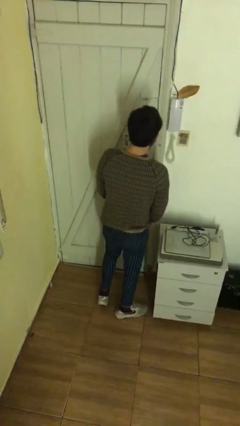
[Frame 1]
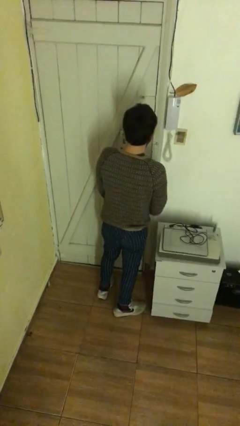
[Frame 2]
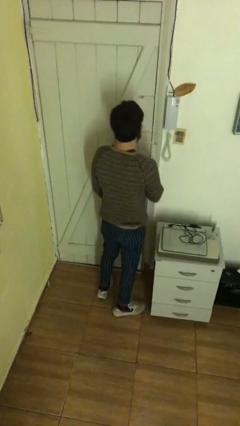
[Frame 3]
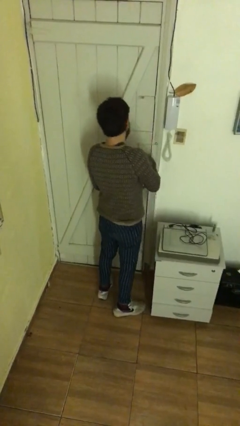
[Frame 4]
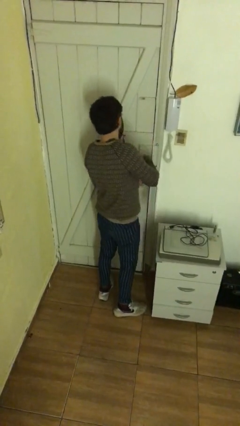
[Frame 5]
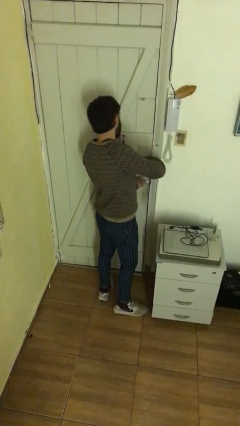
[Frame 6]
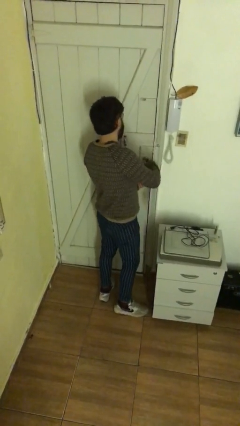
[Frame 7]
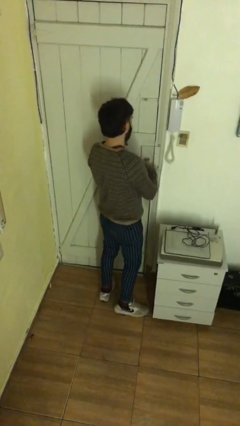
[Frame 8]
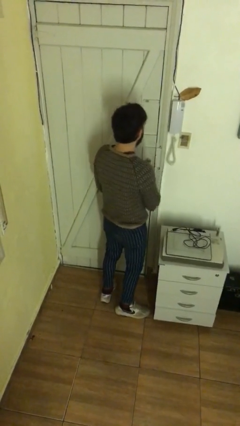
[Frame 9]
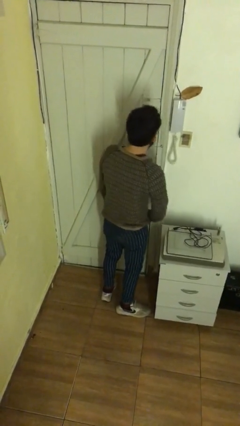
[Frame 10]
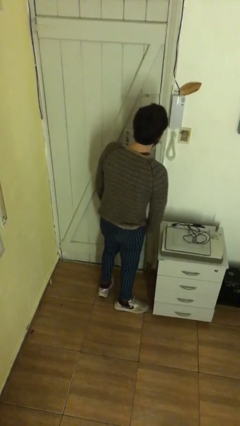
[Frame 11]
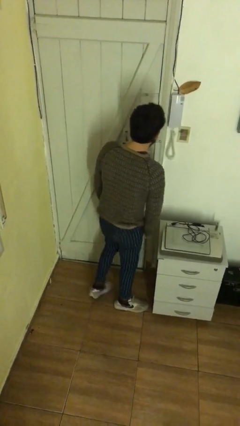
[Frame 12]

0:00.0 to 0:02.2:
person locks door with keys

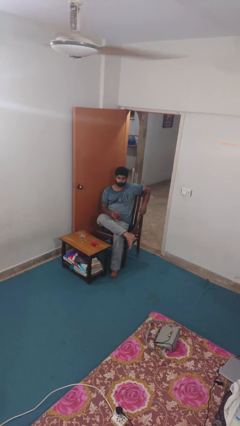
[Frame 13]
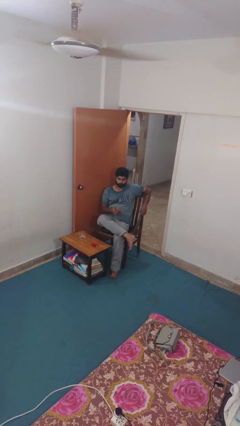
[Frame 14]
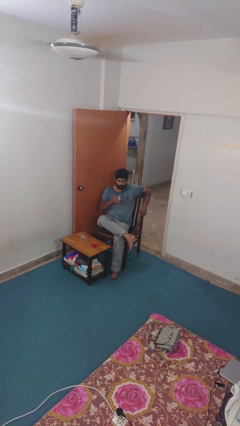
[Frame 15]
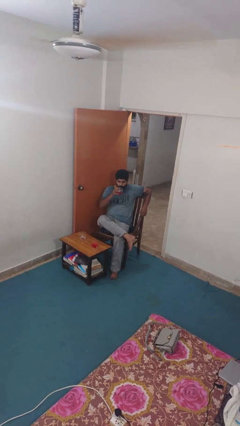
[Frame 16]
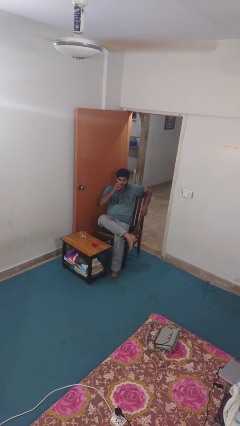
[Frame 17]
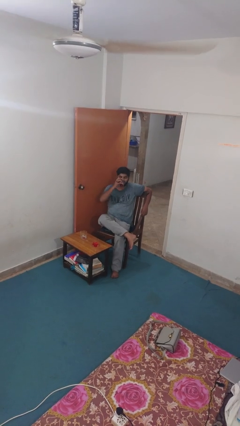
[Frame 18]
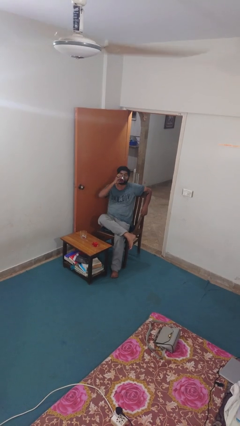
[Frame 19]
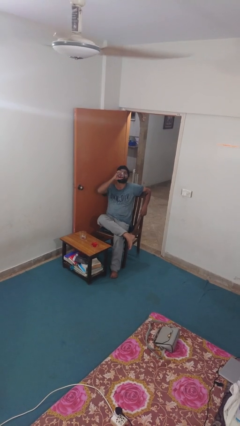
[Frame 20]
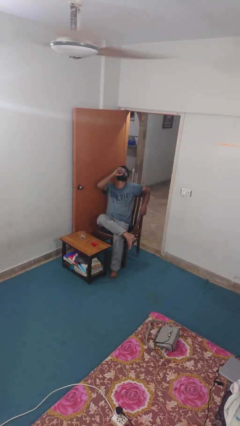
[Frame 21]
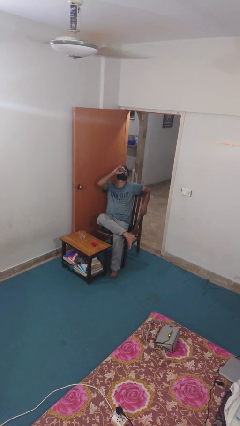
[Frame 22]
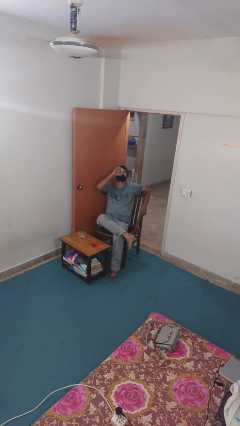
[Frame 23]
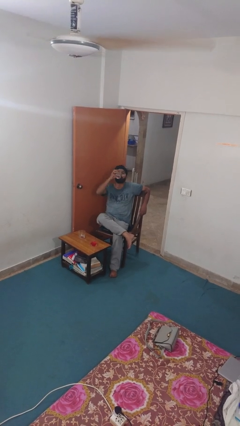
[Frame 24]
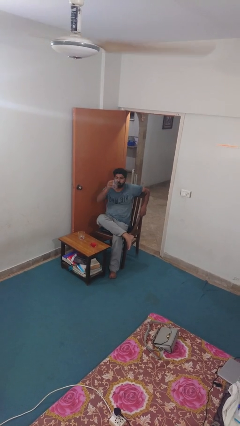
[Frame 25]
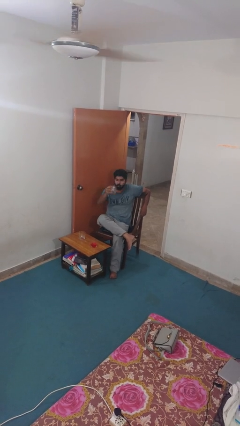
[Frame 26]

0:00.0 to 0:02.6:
person drinks from shotglass

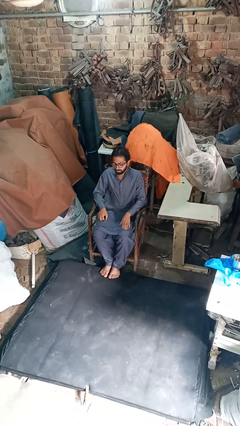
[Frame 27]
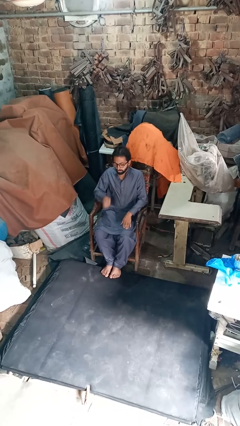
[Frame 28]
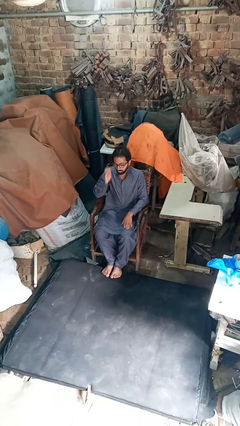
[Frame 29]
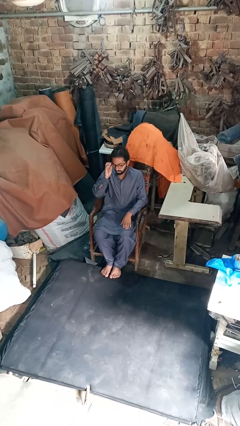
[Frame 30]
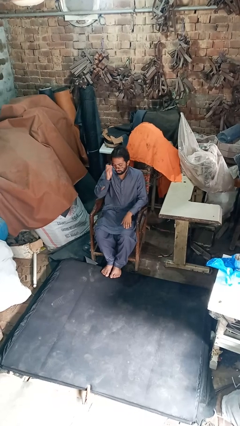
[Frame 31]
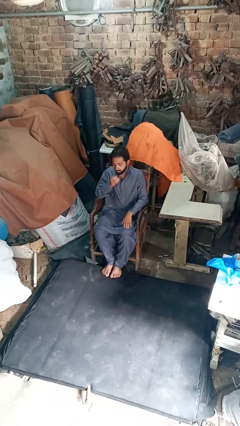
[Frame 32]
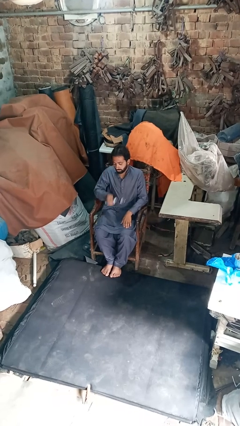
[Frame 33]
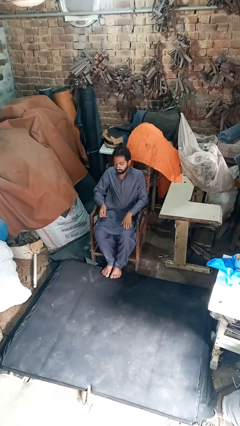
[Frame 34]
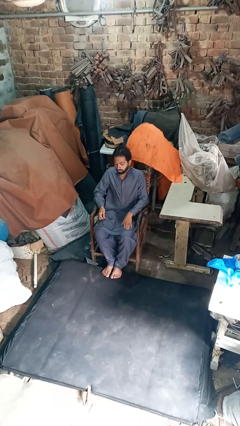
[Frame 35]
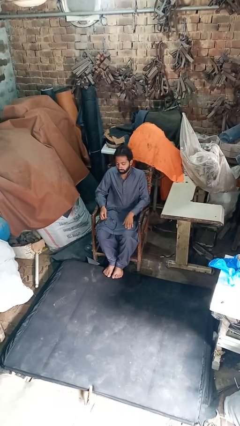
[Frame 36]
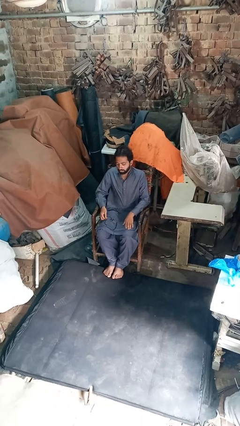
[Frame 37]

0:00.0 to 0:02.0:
person takes off glasses

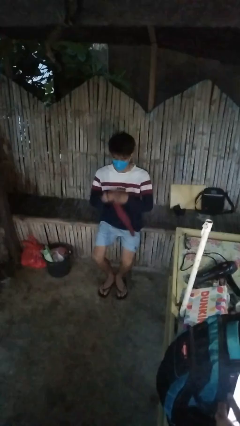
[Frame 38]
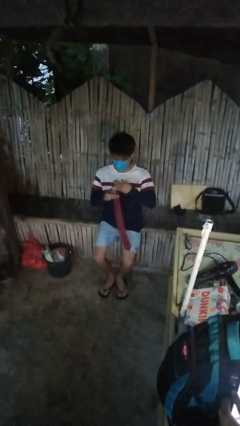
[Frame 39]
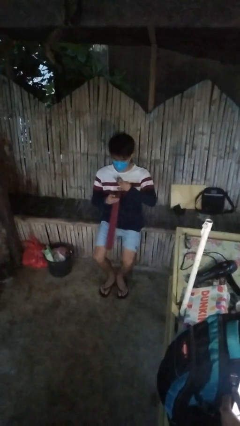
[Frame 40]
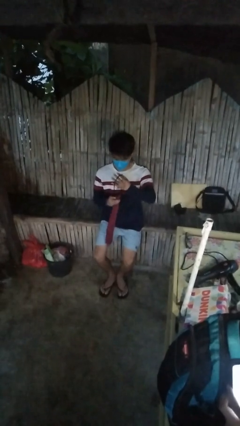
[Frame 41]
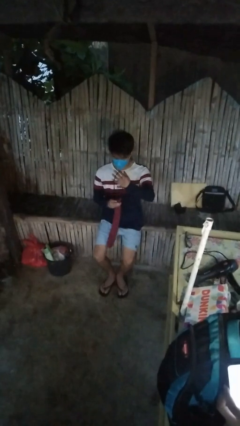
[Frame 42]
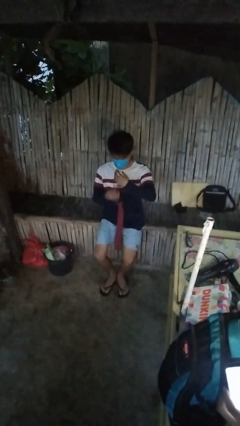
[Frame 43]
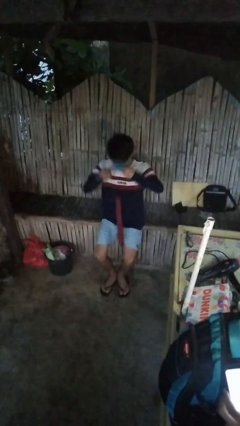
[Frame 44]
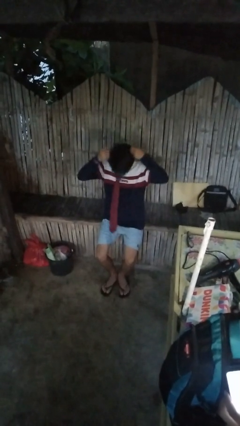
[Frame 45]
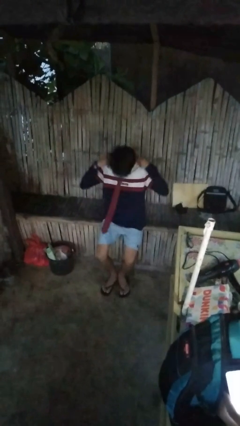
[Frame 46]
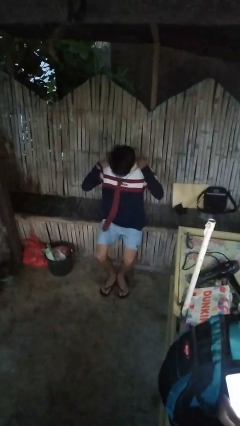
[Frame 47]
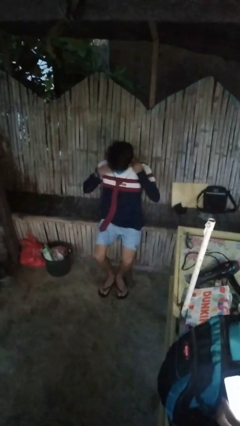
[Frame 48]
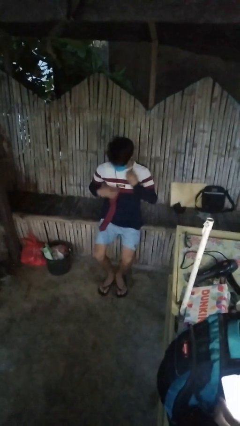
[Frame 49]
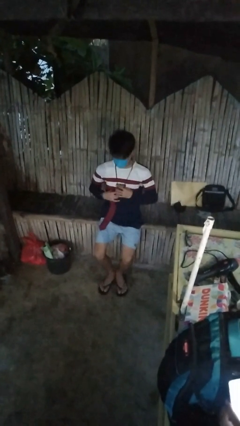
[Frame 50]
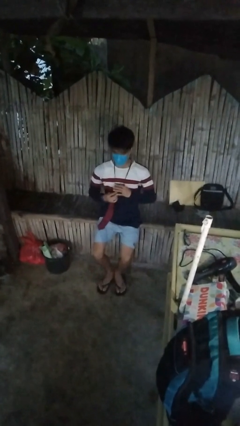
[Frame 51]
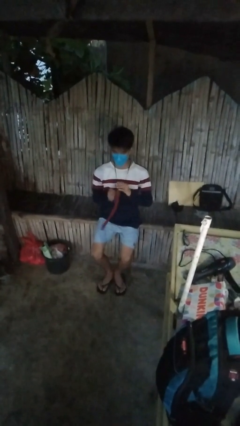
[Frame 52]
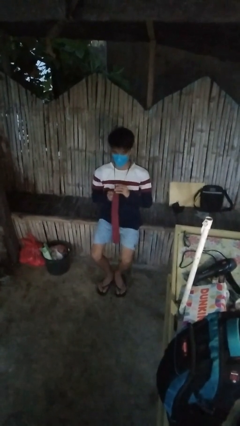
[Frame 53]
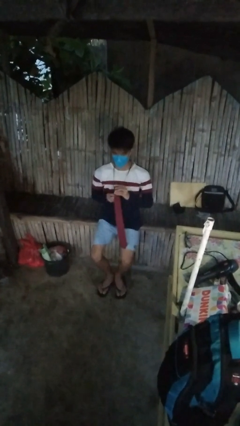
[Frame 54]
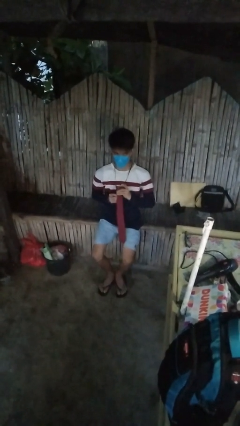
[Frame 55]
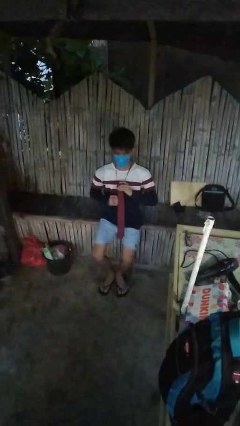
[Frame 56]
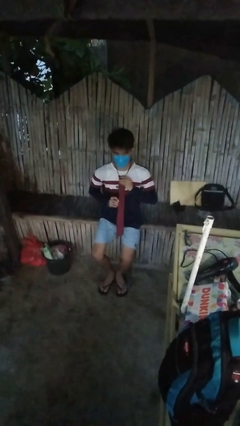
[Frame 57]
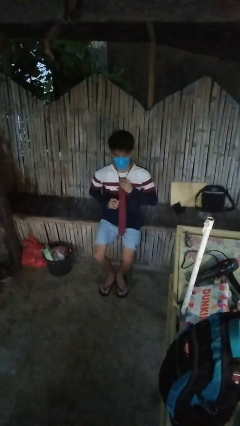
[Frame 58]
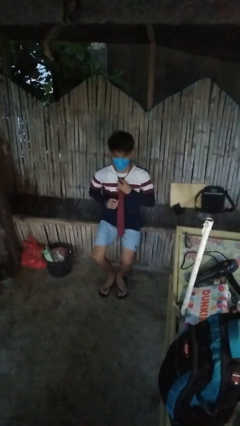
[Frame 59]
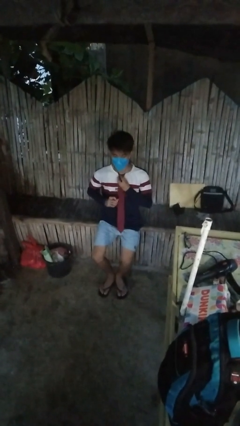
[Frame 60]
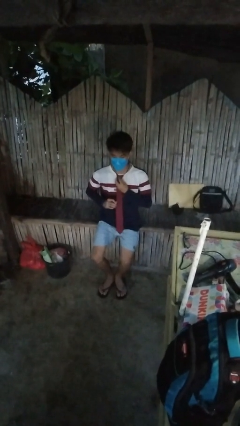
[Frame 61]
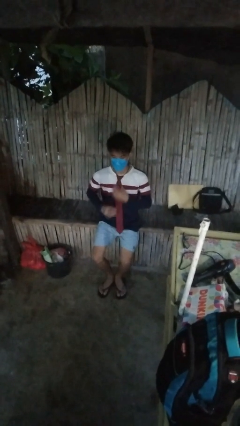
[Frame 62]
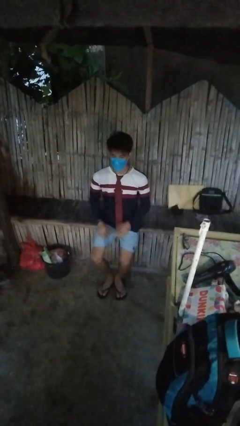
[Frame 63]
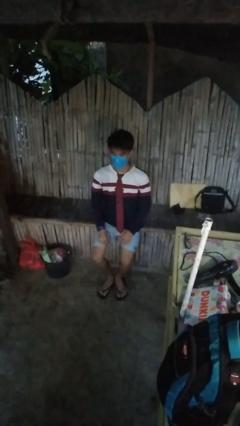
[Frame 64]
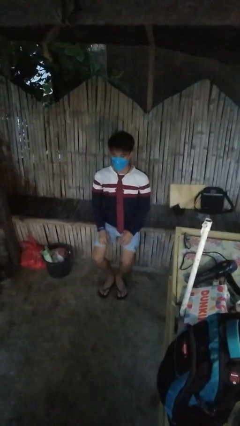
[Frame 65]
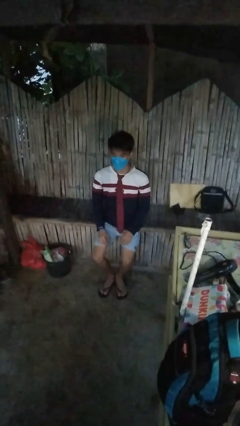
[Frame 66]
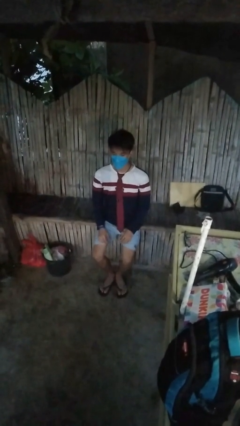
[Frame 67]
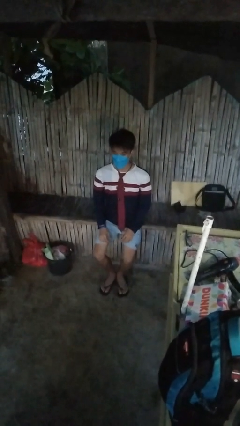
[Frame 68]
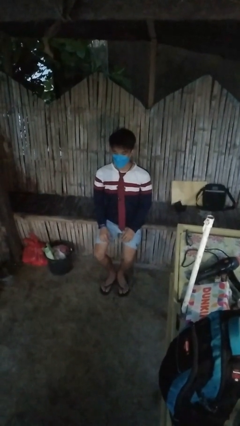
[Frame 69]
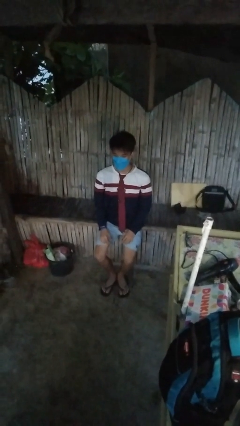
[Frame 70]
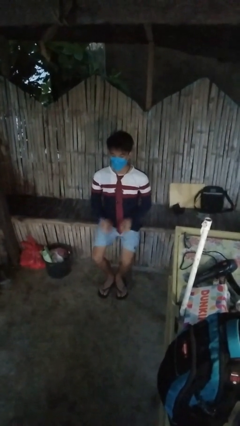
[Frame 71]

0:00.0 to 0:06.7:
person puts on necktie

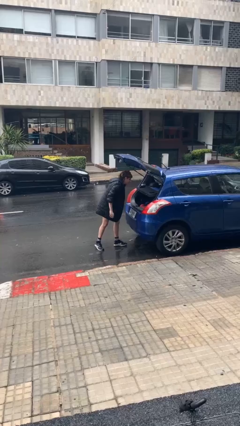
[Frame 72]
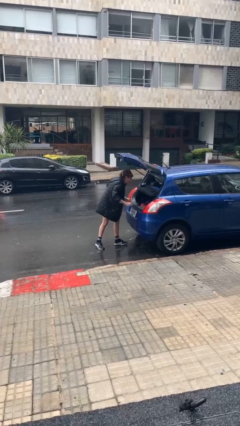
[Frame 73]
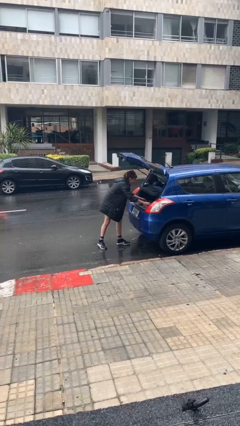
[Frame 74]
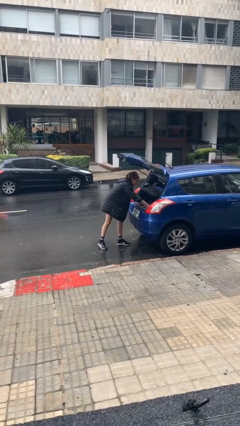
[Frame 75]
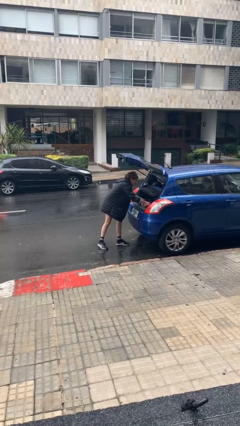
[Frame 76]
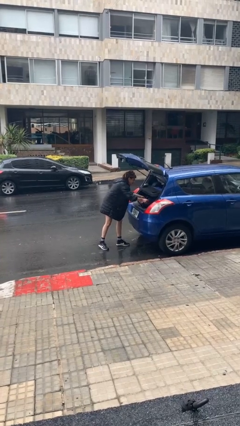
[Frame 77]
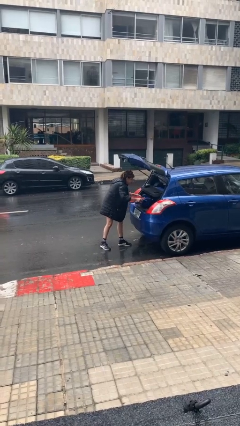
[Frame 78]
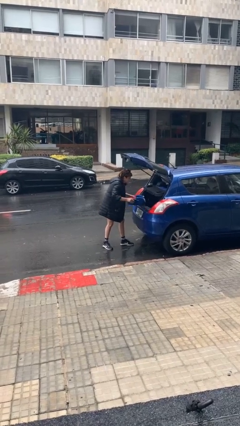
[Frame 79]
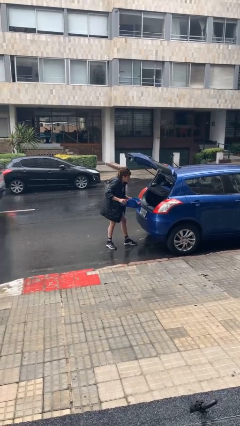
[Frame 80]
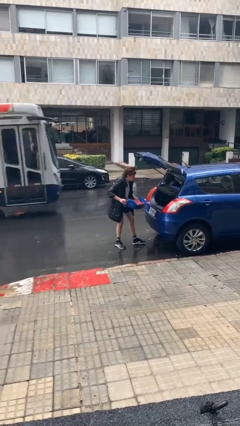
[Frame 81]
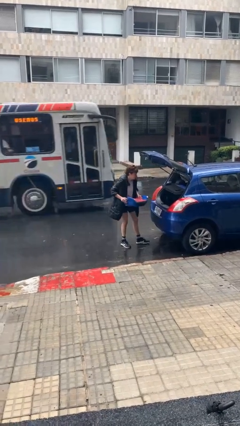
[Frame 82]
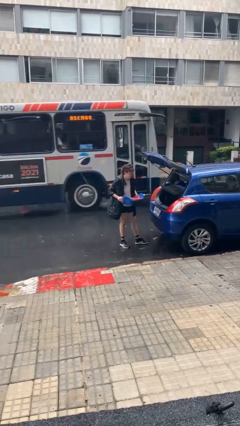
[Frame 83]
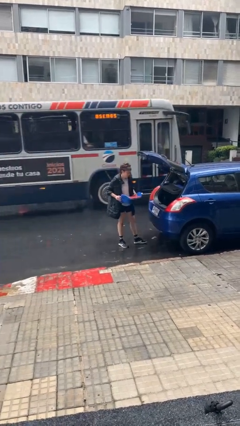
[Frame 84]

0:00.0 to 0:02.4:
person unloads car

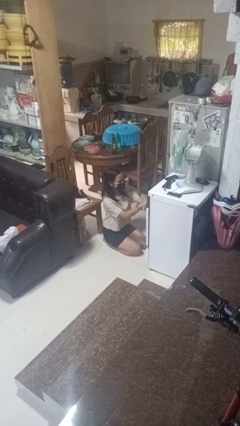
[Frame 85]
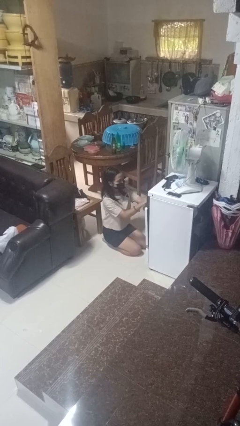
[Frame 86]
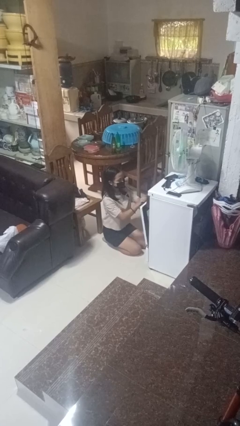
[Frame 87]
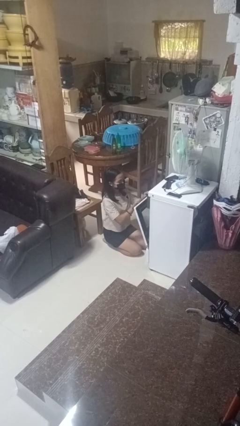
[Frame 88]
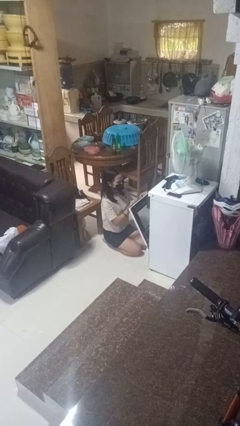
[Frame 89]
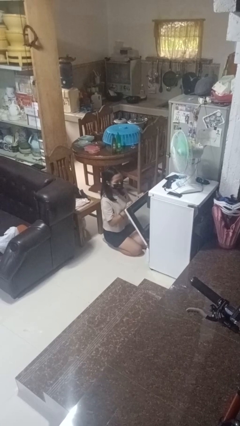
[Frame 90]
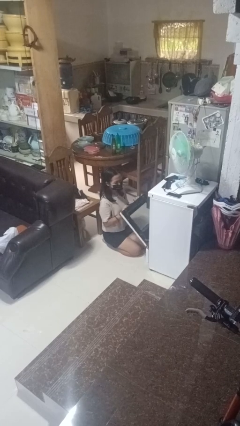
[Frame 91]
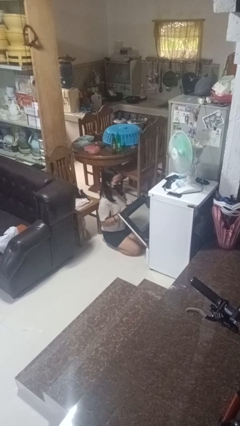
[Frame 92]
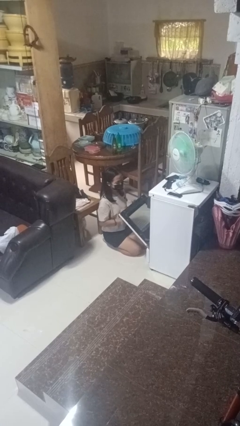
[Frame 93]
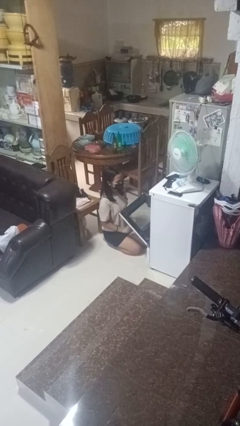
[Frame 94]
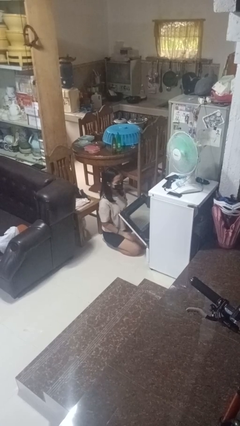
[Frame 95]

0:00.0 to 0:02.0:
person opens oven door
